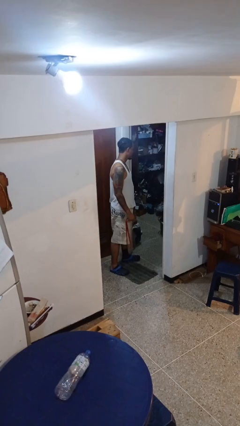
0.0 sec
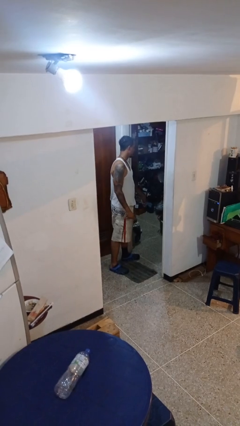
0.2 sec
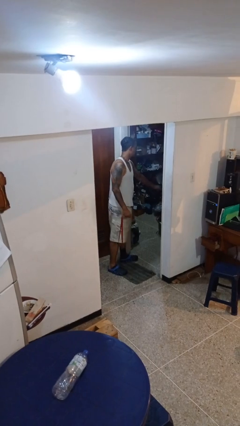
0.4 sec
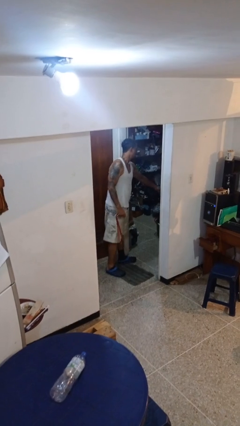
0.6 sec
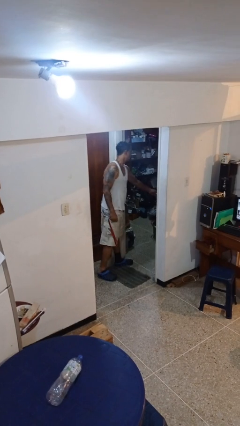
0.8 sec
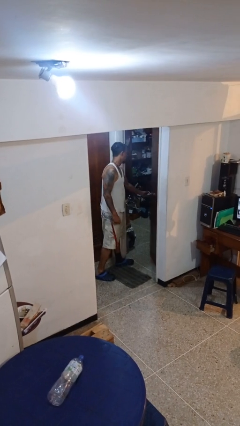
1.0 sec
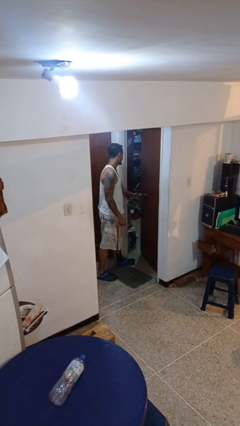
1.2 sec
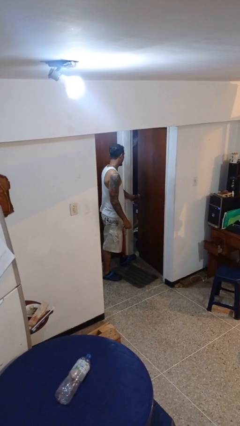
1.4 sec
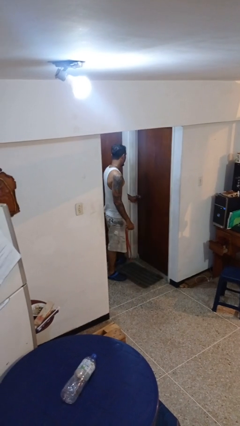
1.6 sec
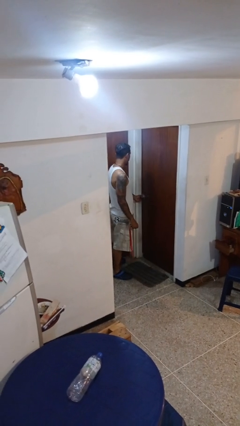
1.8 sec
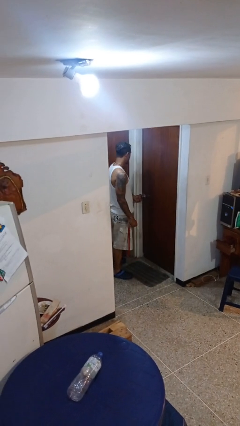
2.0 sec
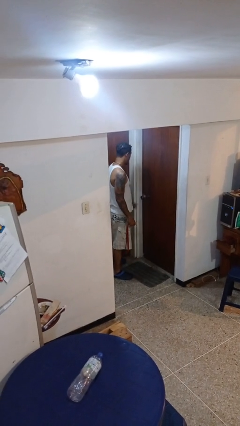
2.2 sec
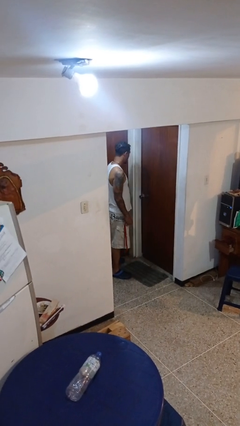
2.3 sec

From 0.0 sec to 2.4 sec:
person closes facility door

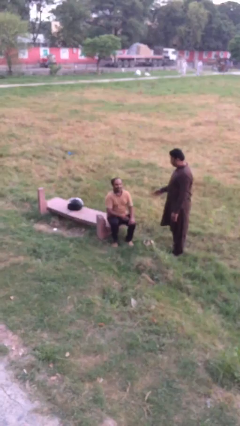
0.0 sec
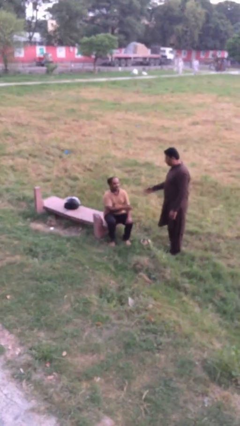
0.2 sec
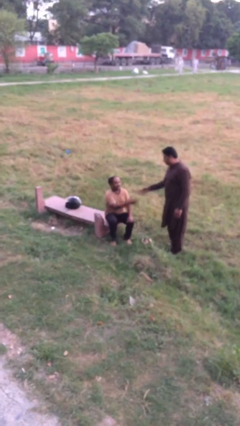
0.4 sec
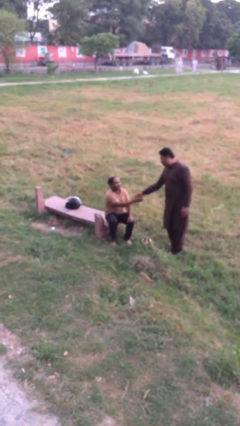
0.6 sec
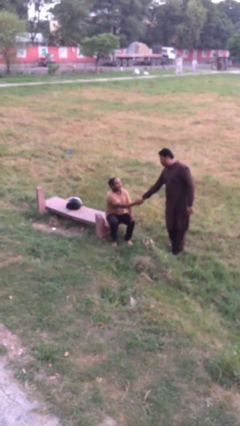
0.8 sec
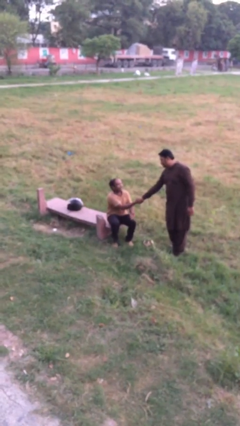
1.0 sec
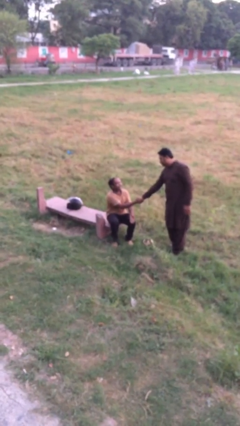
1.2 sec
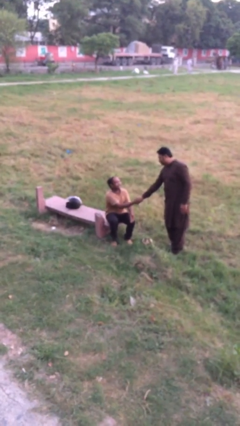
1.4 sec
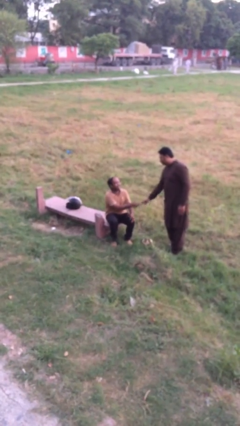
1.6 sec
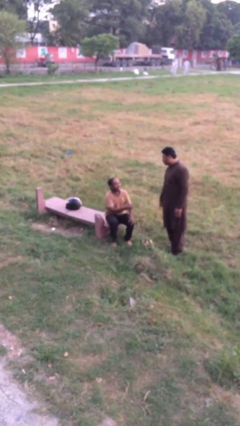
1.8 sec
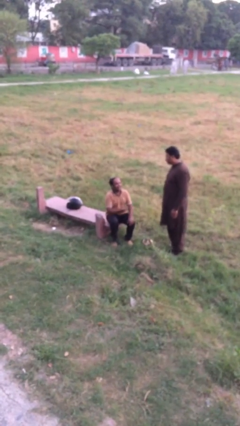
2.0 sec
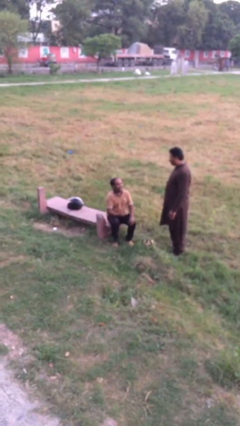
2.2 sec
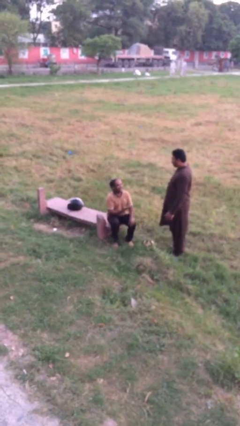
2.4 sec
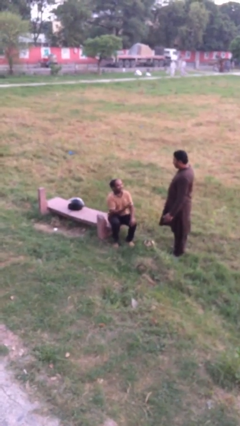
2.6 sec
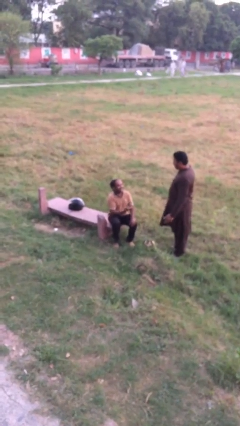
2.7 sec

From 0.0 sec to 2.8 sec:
person shakes hand

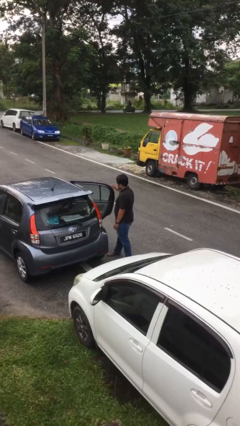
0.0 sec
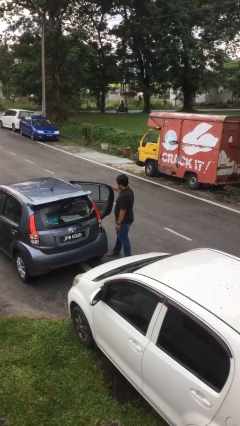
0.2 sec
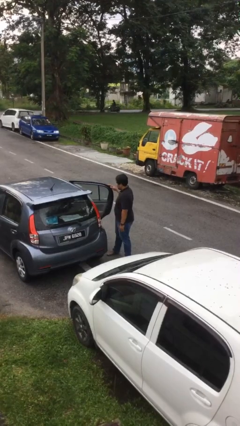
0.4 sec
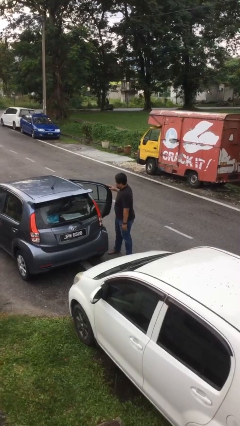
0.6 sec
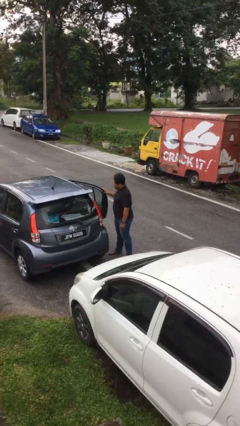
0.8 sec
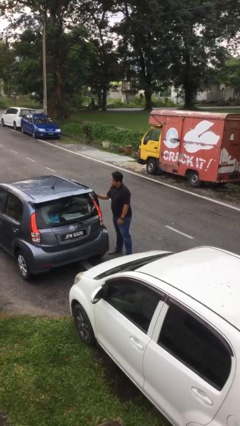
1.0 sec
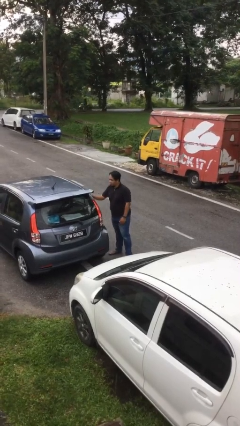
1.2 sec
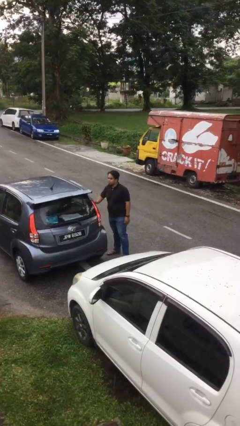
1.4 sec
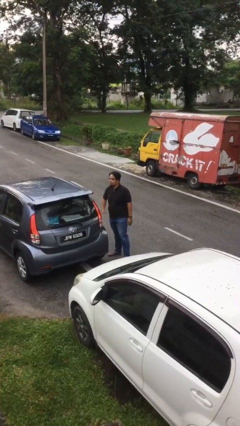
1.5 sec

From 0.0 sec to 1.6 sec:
person closes car door

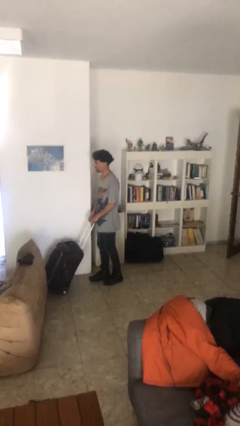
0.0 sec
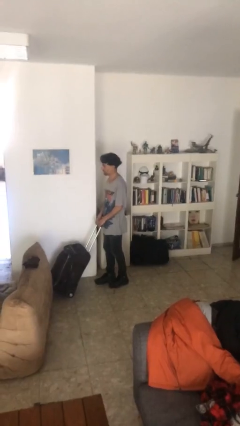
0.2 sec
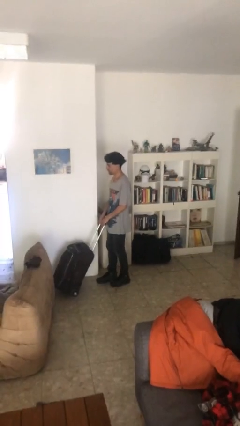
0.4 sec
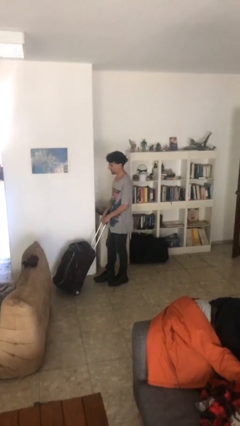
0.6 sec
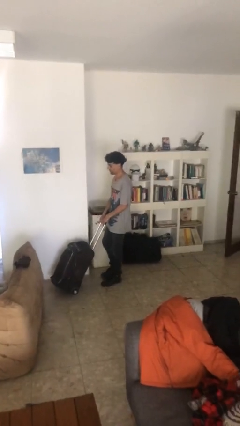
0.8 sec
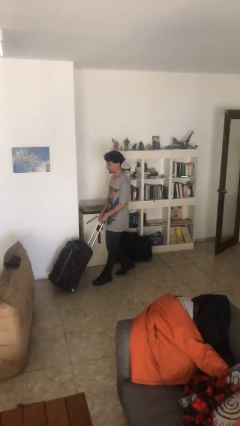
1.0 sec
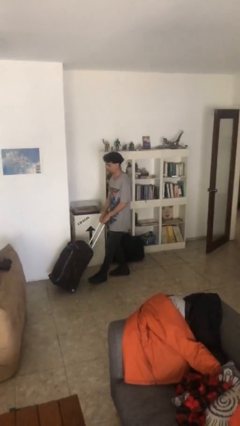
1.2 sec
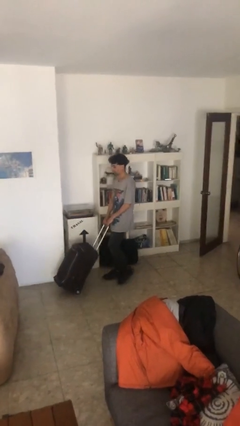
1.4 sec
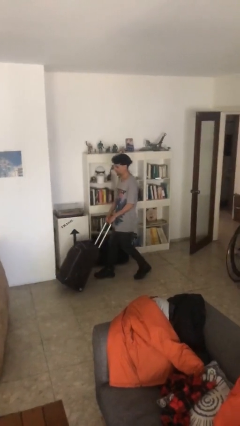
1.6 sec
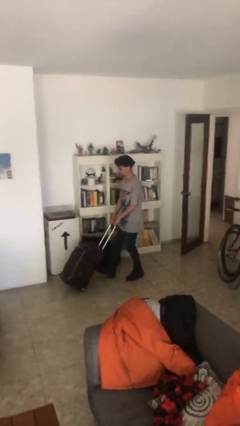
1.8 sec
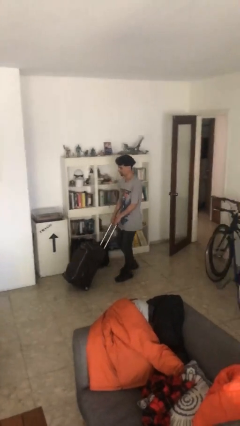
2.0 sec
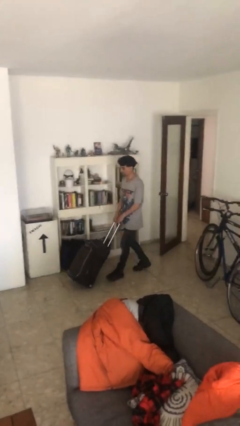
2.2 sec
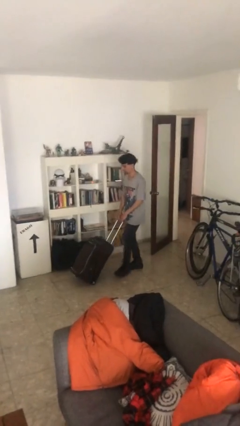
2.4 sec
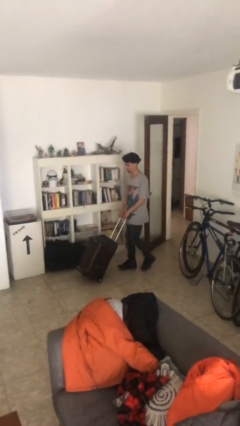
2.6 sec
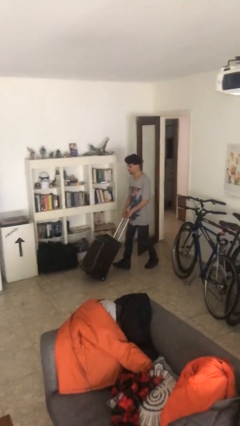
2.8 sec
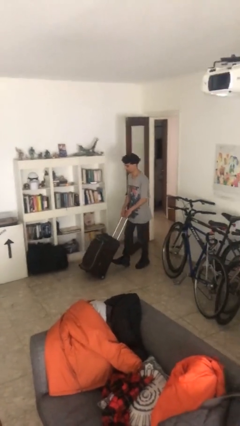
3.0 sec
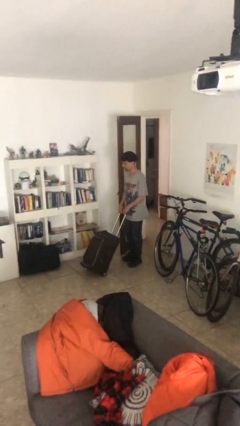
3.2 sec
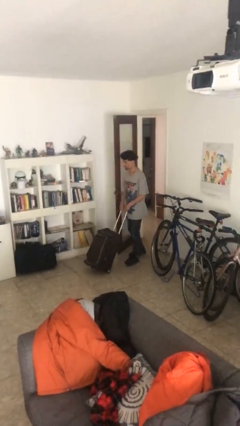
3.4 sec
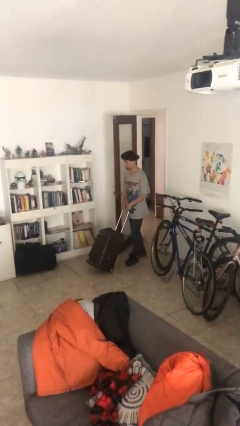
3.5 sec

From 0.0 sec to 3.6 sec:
person pulls wheeled cart

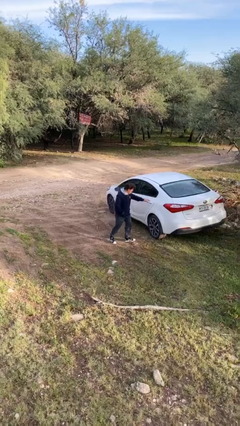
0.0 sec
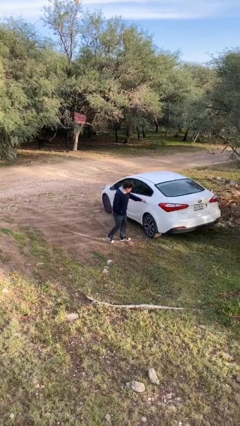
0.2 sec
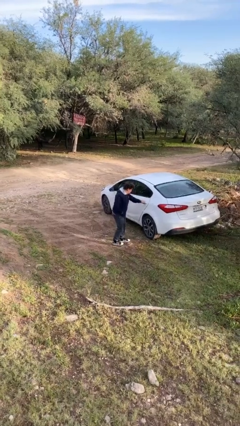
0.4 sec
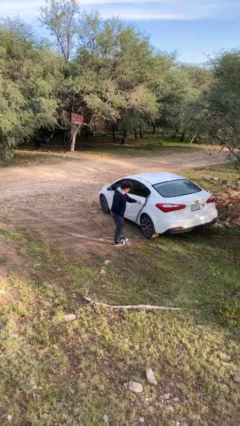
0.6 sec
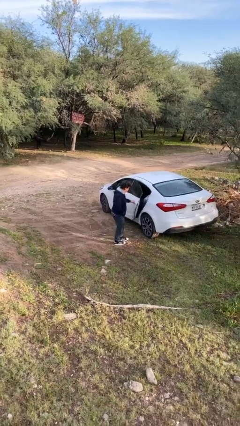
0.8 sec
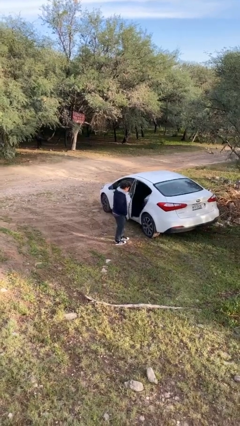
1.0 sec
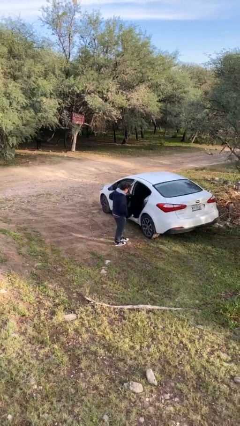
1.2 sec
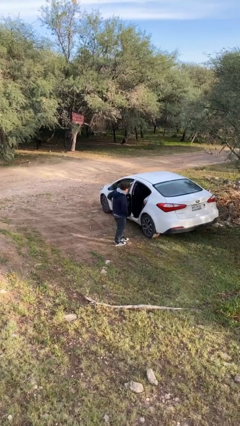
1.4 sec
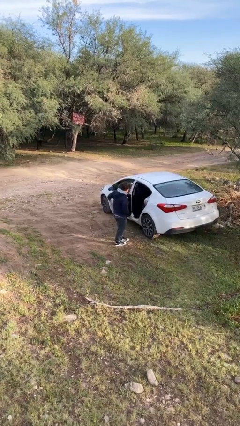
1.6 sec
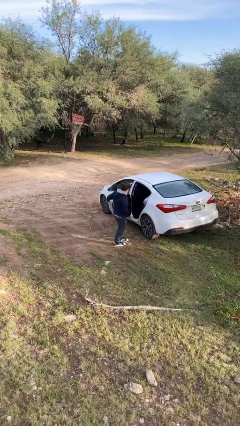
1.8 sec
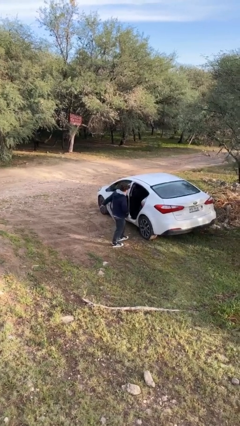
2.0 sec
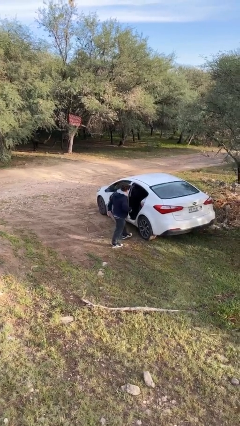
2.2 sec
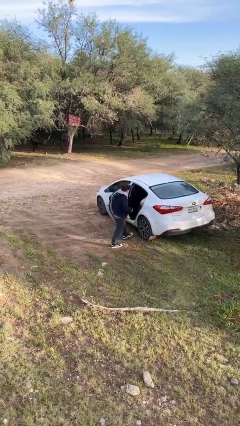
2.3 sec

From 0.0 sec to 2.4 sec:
person opens car door

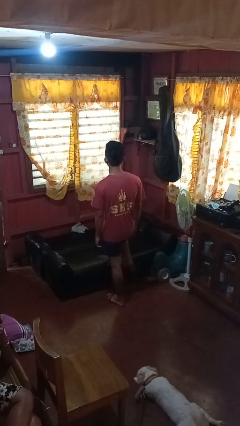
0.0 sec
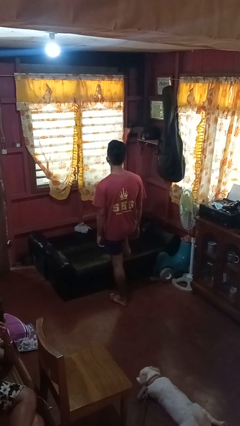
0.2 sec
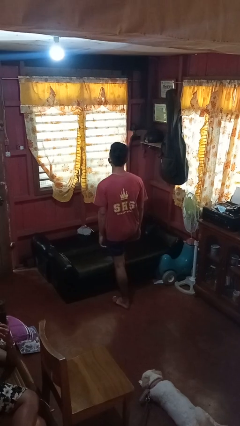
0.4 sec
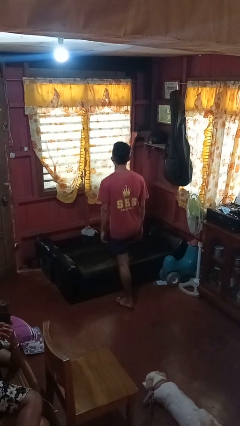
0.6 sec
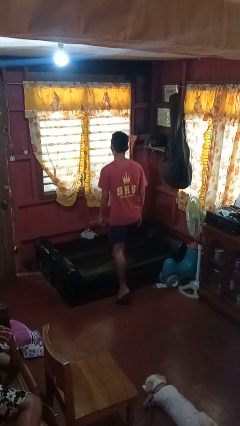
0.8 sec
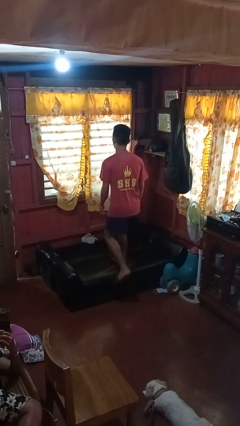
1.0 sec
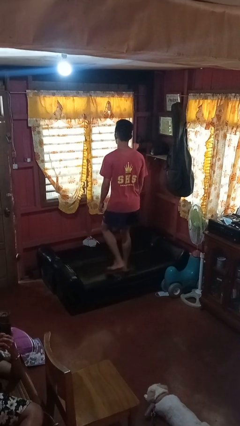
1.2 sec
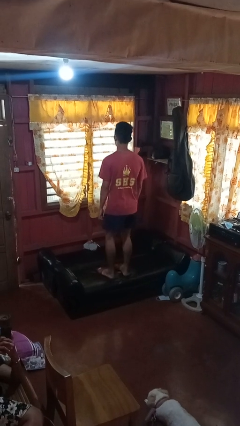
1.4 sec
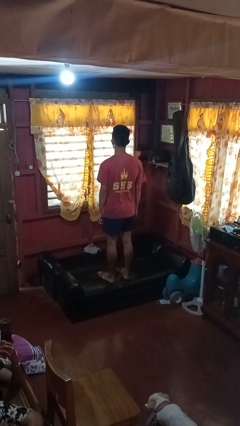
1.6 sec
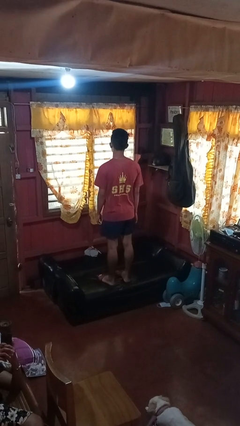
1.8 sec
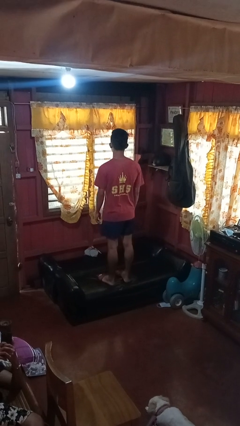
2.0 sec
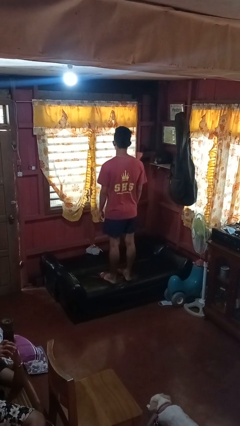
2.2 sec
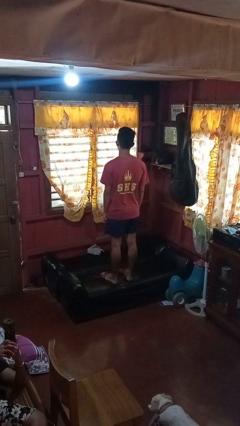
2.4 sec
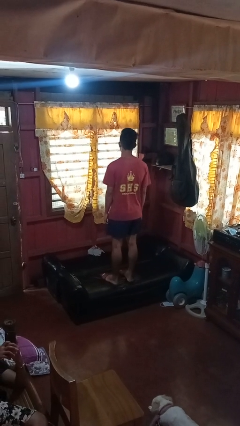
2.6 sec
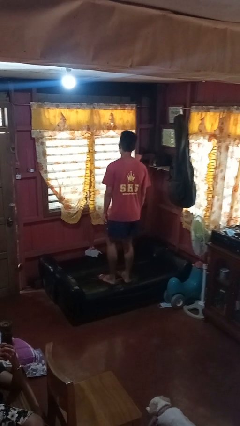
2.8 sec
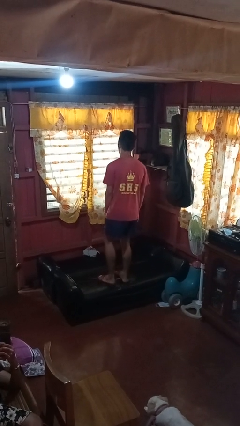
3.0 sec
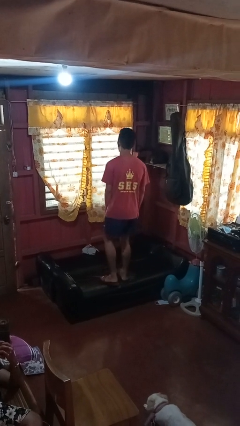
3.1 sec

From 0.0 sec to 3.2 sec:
person climbs on couch

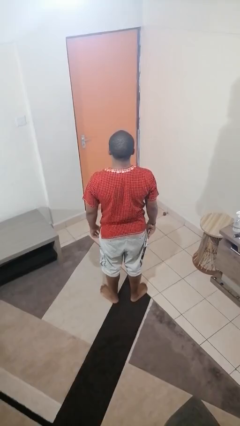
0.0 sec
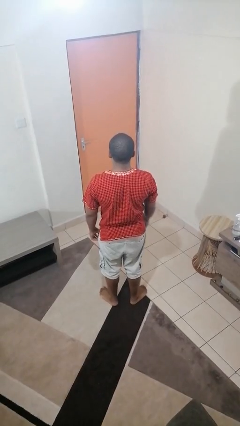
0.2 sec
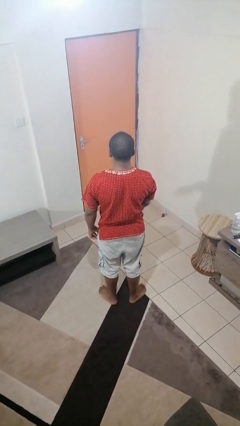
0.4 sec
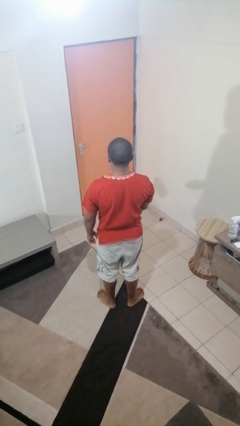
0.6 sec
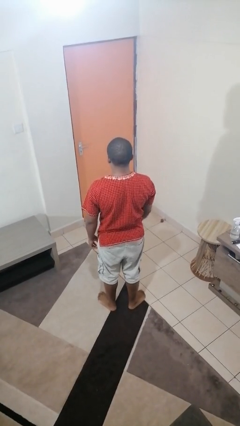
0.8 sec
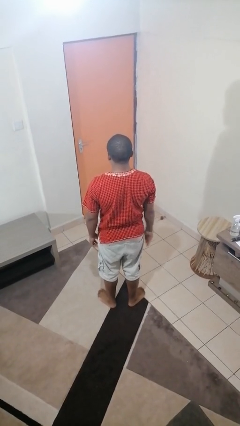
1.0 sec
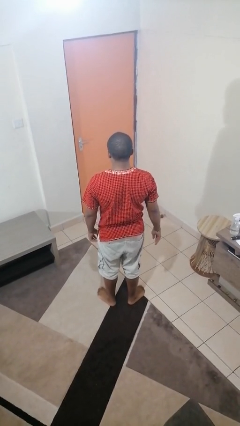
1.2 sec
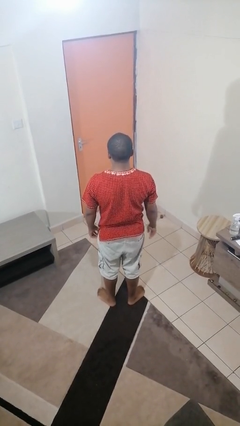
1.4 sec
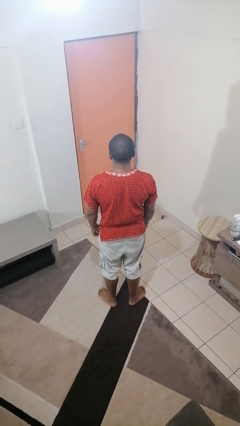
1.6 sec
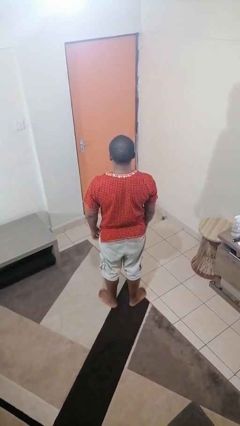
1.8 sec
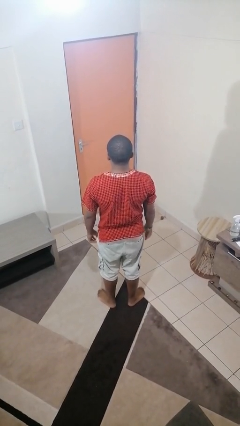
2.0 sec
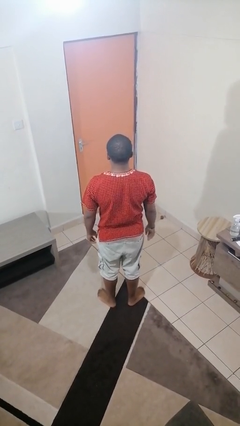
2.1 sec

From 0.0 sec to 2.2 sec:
person throws object to ground
